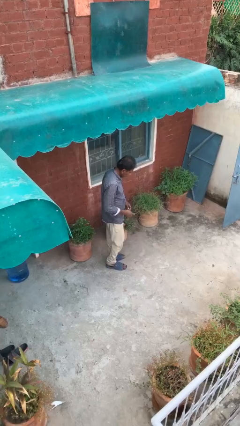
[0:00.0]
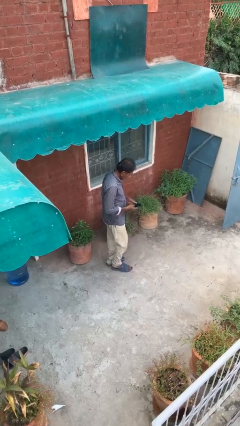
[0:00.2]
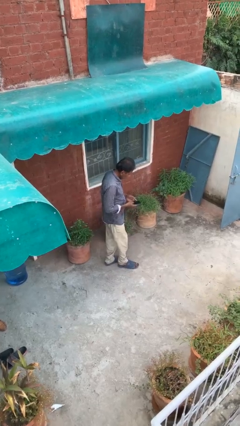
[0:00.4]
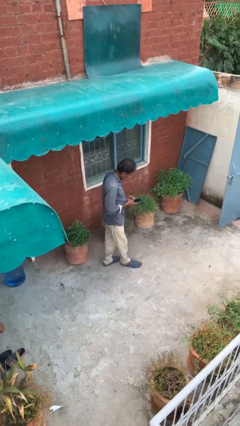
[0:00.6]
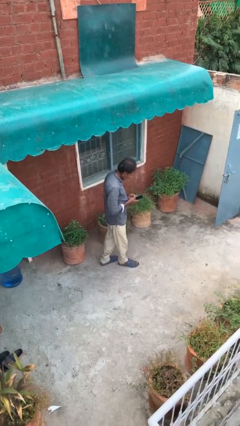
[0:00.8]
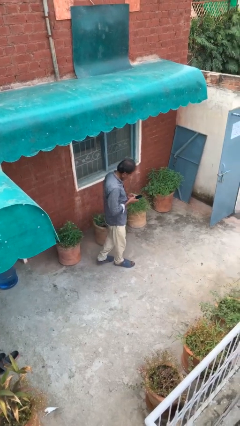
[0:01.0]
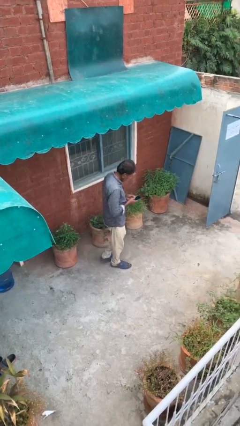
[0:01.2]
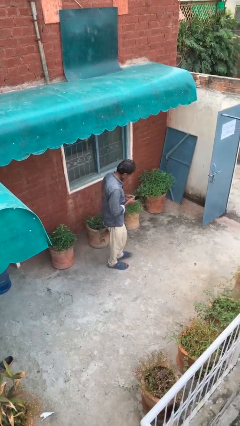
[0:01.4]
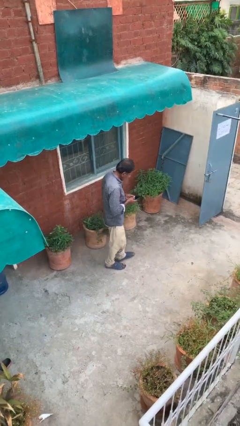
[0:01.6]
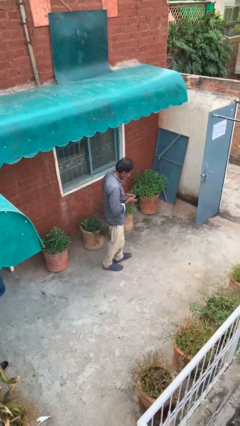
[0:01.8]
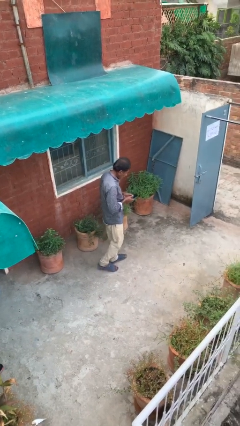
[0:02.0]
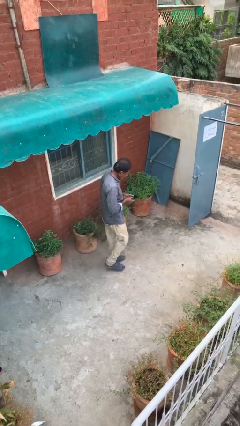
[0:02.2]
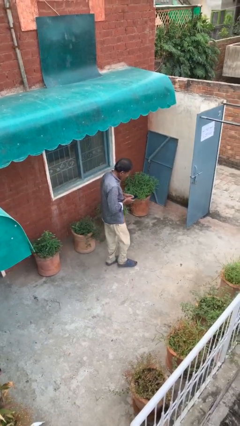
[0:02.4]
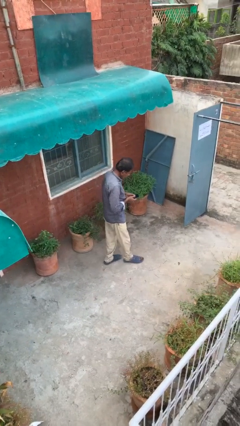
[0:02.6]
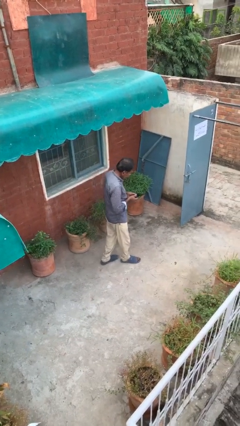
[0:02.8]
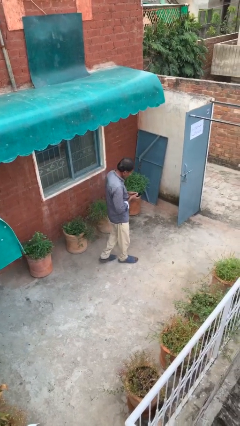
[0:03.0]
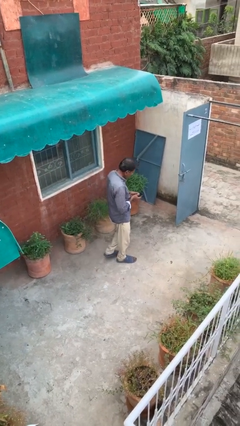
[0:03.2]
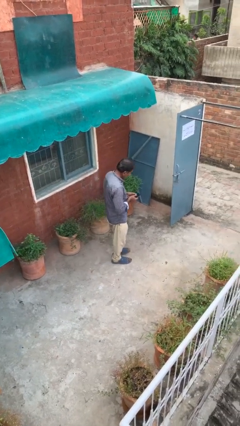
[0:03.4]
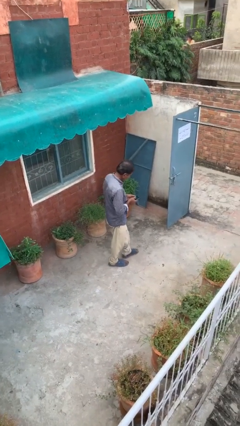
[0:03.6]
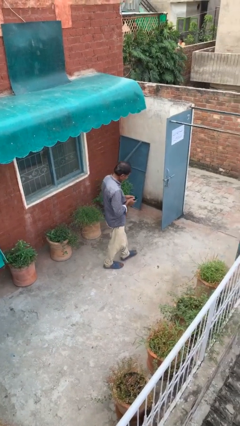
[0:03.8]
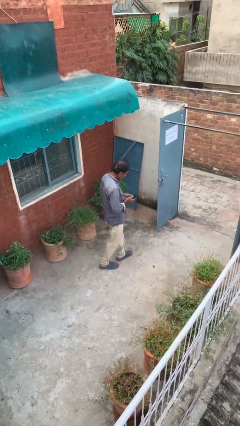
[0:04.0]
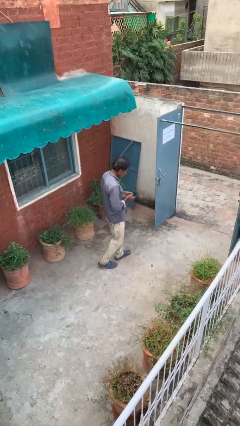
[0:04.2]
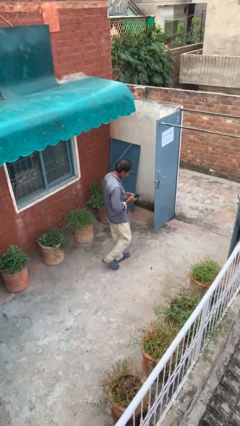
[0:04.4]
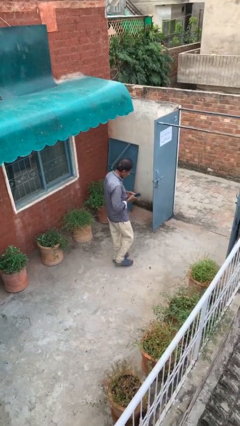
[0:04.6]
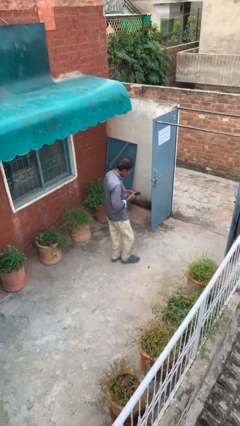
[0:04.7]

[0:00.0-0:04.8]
person texts on phone

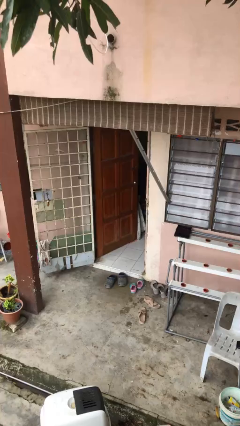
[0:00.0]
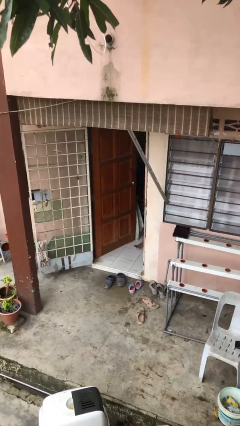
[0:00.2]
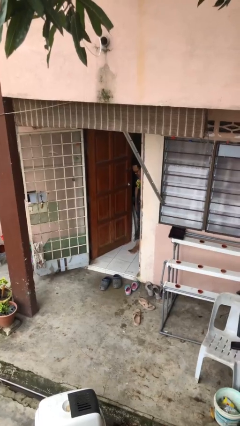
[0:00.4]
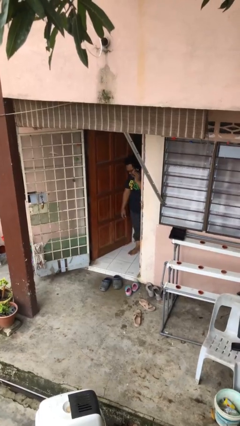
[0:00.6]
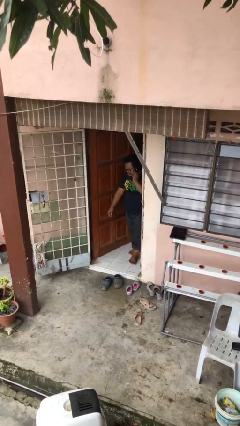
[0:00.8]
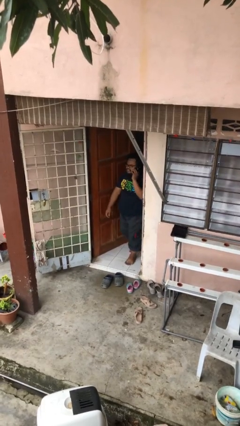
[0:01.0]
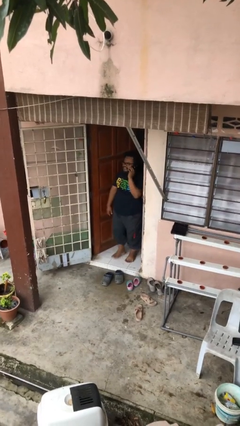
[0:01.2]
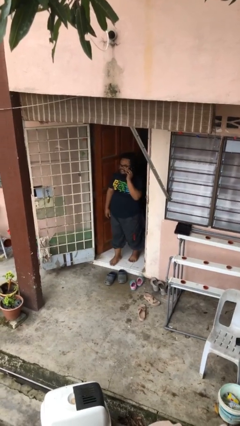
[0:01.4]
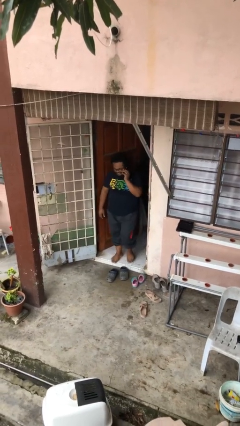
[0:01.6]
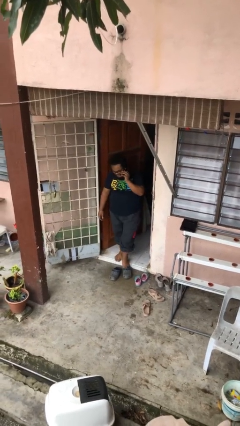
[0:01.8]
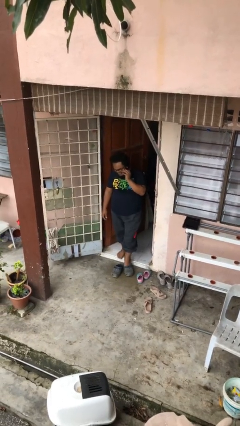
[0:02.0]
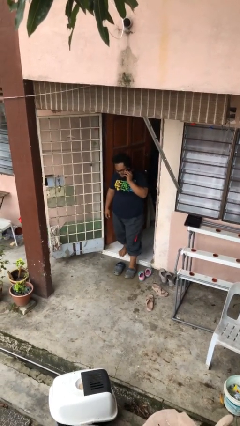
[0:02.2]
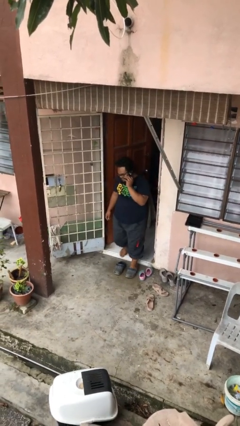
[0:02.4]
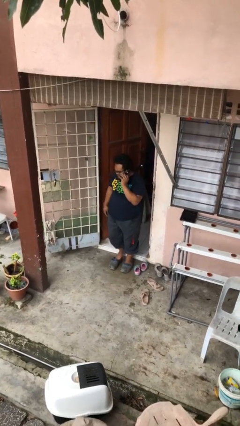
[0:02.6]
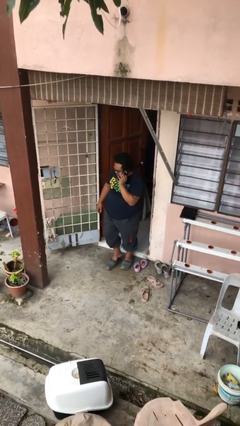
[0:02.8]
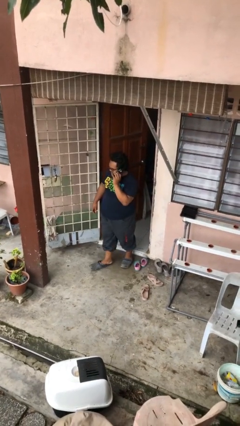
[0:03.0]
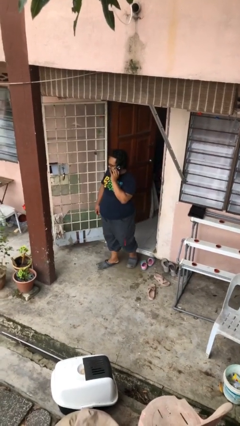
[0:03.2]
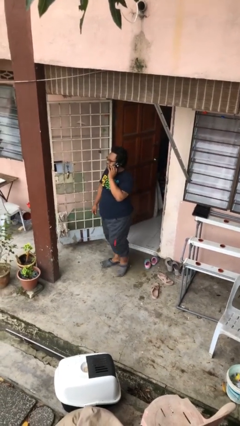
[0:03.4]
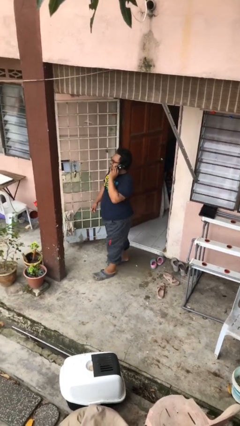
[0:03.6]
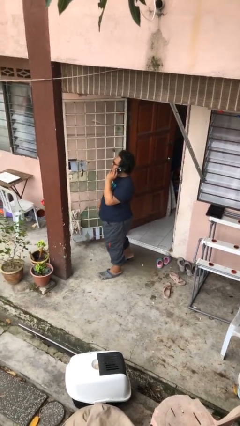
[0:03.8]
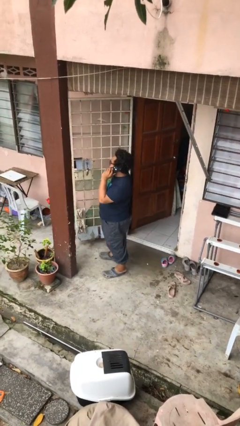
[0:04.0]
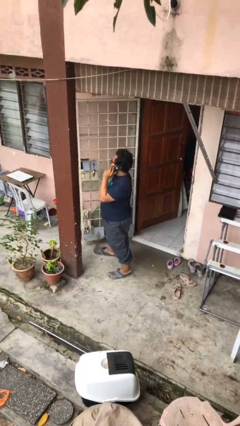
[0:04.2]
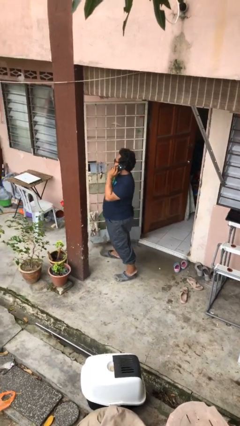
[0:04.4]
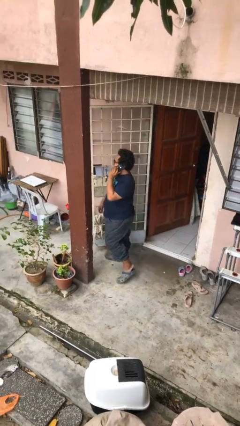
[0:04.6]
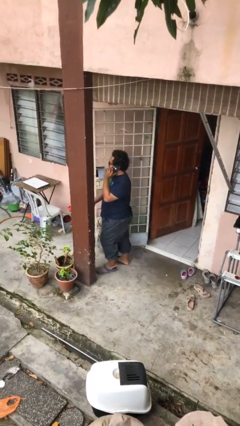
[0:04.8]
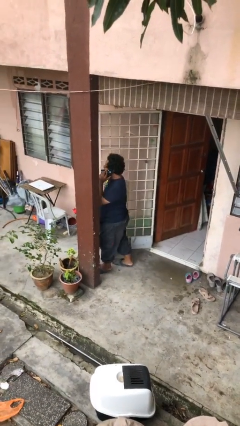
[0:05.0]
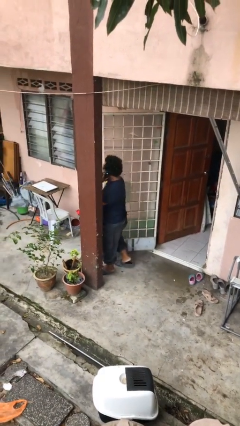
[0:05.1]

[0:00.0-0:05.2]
person enters scene through structure

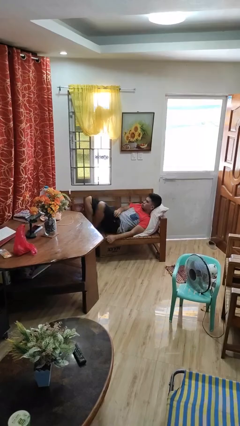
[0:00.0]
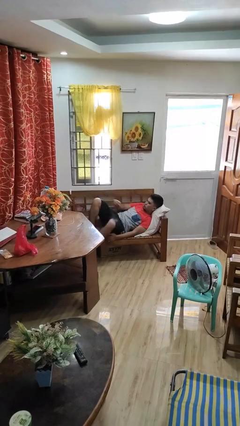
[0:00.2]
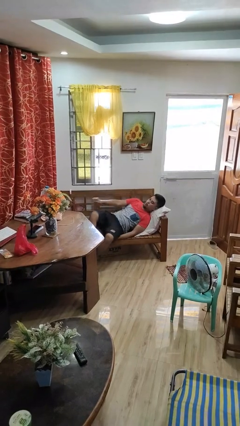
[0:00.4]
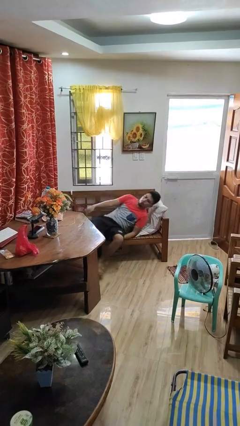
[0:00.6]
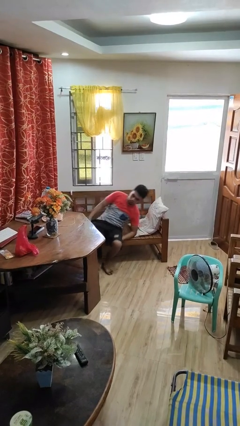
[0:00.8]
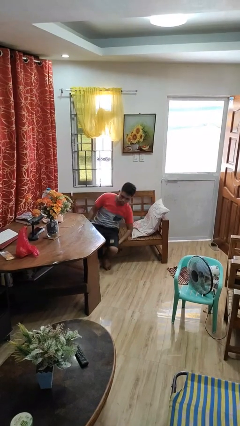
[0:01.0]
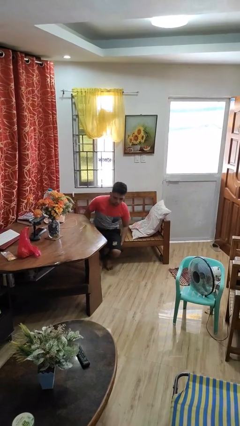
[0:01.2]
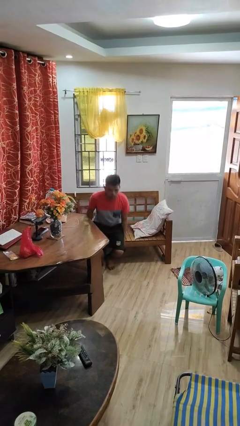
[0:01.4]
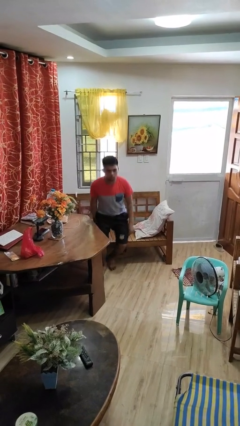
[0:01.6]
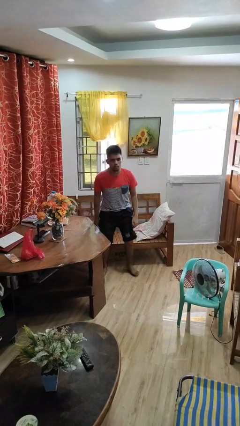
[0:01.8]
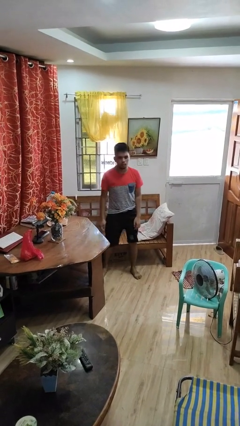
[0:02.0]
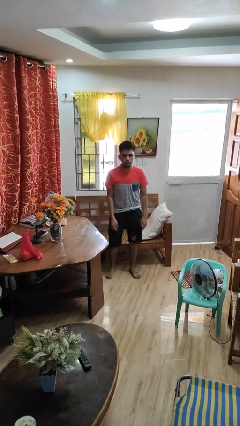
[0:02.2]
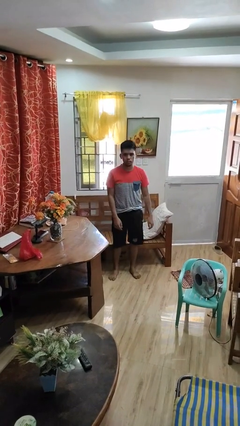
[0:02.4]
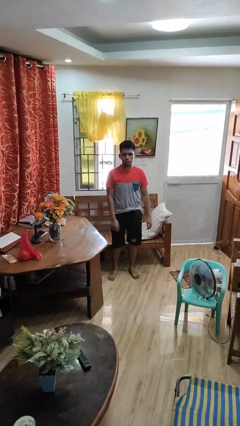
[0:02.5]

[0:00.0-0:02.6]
person stands up

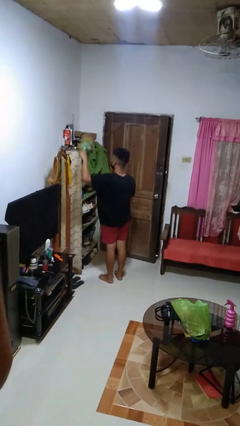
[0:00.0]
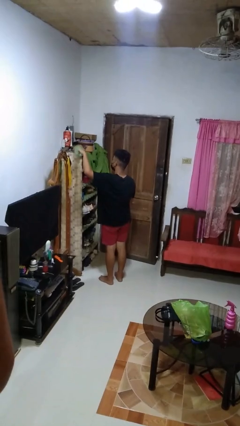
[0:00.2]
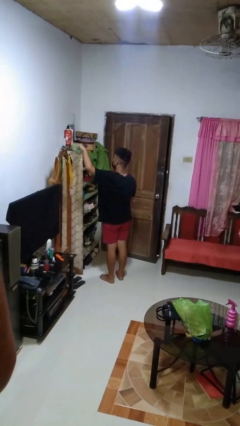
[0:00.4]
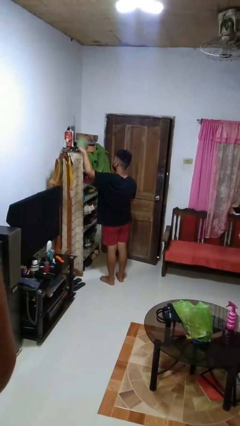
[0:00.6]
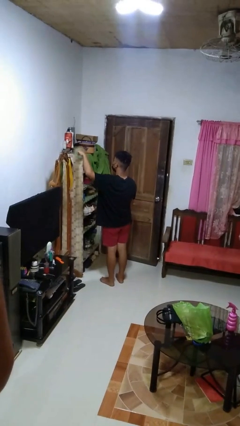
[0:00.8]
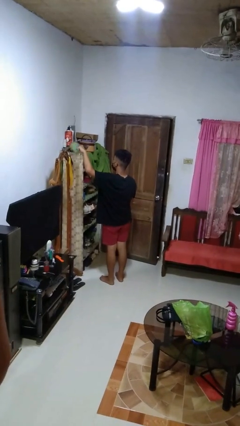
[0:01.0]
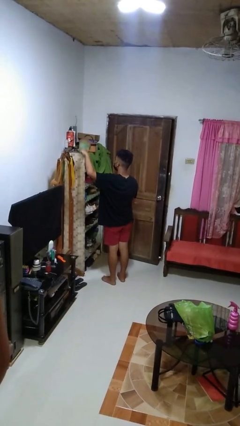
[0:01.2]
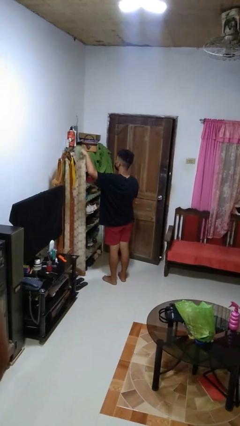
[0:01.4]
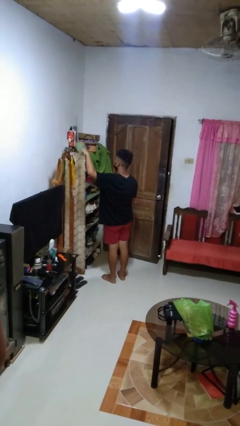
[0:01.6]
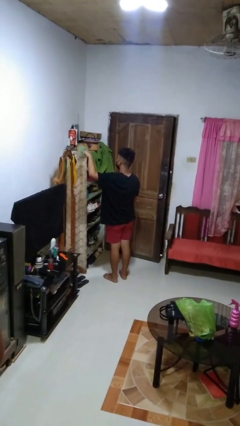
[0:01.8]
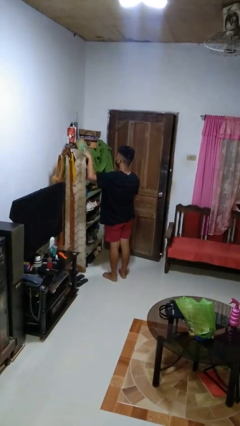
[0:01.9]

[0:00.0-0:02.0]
person dusts furniture

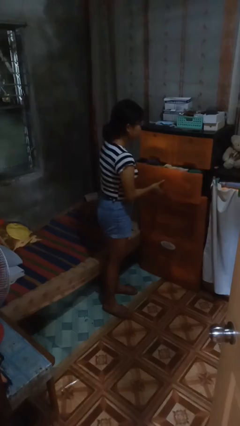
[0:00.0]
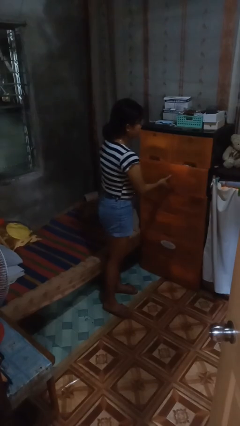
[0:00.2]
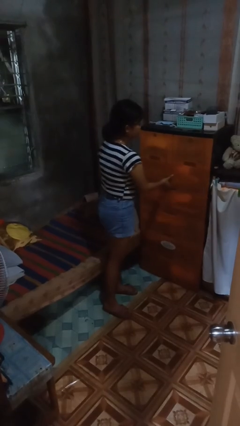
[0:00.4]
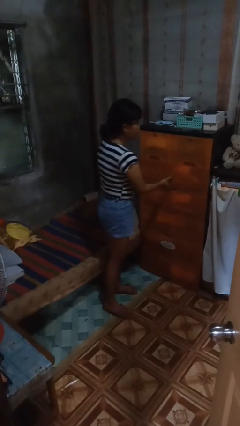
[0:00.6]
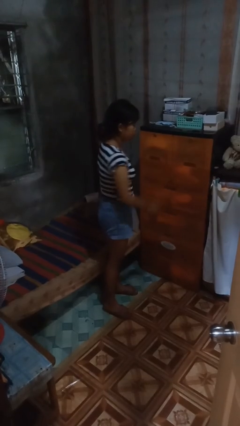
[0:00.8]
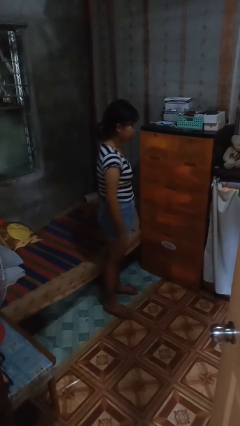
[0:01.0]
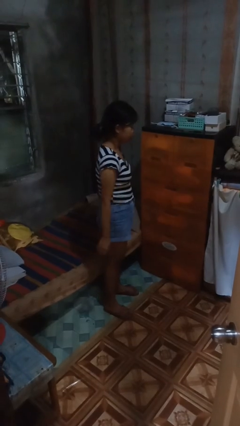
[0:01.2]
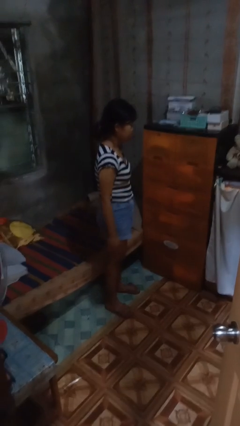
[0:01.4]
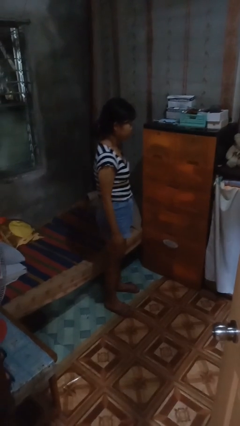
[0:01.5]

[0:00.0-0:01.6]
person closes dresser drawer

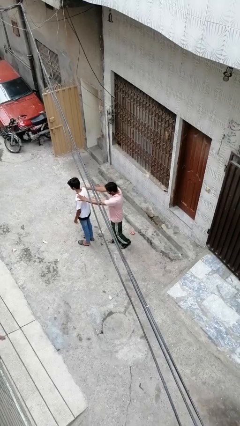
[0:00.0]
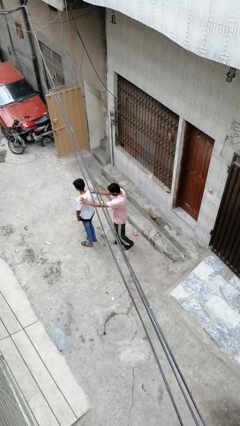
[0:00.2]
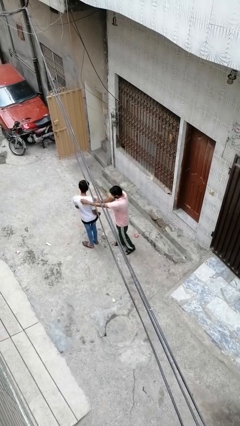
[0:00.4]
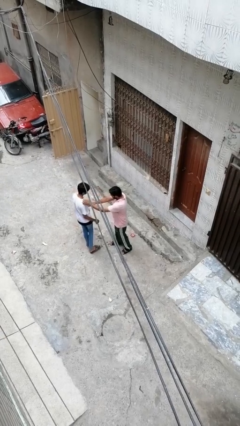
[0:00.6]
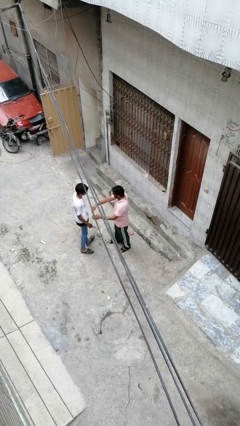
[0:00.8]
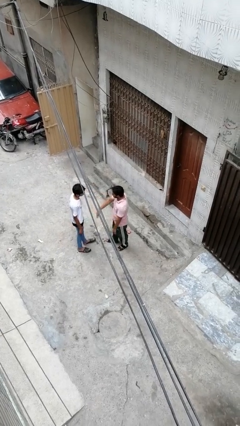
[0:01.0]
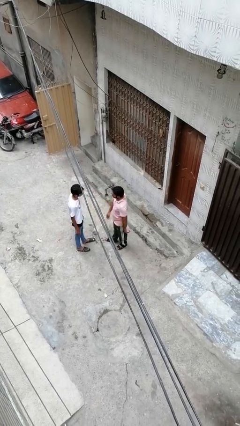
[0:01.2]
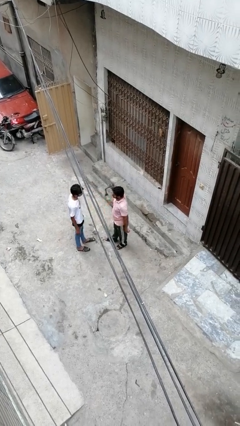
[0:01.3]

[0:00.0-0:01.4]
person spins person around
